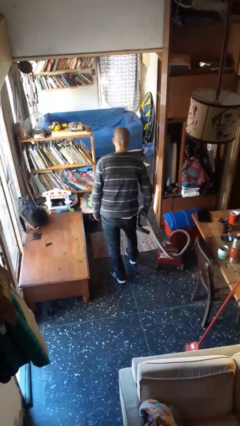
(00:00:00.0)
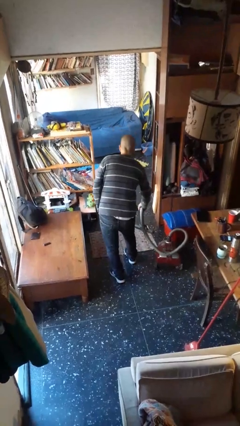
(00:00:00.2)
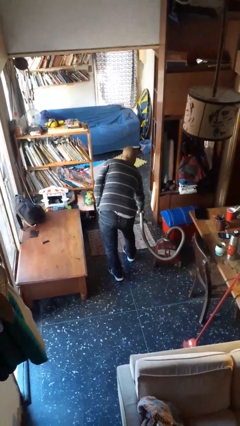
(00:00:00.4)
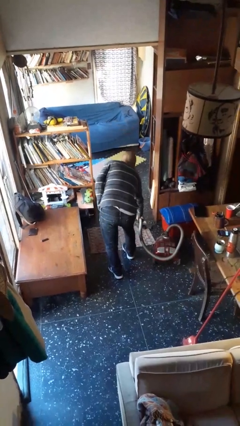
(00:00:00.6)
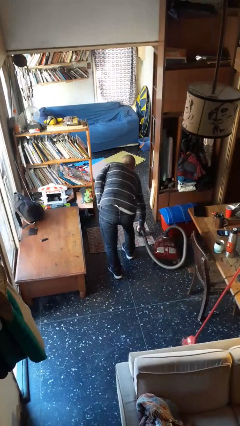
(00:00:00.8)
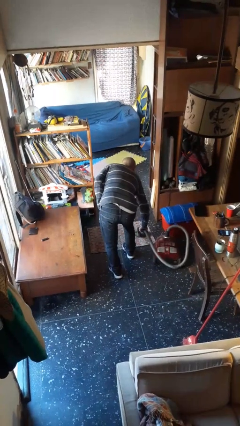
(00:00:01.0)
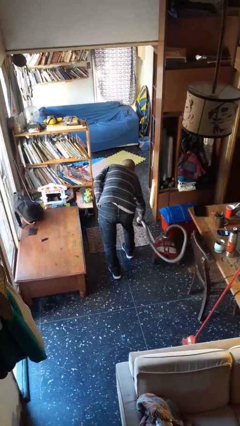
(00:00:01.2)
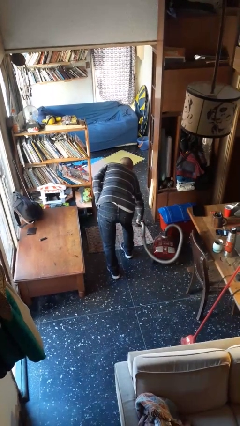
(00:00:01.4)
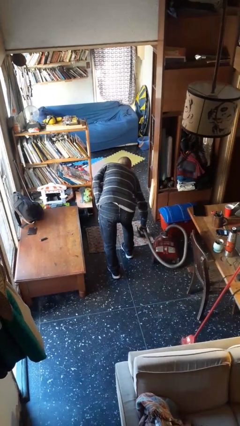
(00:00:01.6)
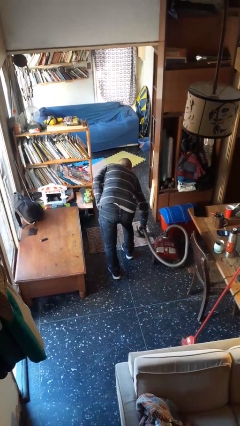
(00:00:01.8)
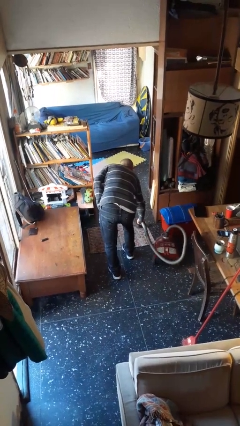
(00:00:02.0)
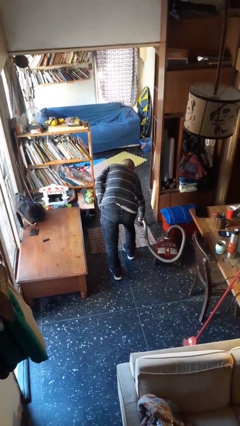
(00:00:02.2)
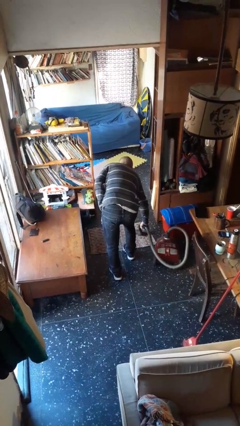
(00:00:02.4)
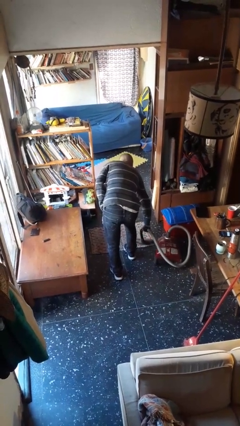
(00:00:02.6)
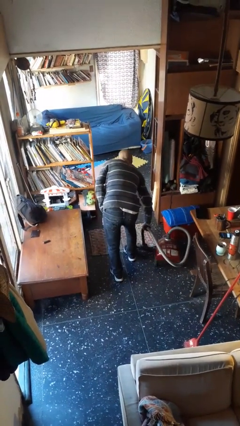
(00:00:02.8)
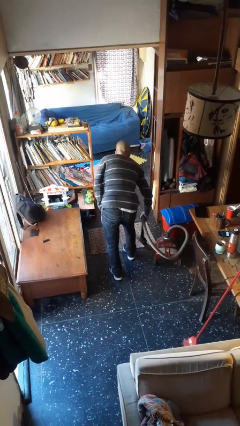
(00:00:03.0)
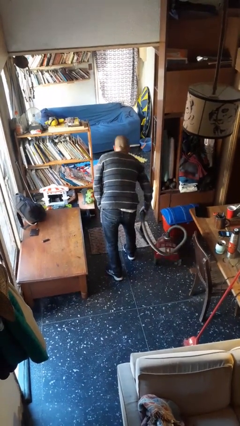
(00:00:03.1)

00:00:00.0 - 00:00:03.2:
person vacuums carpet

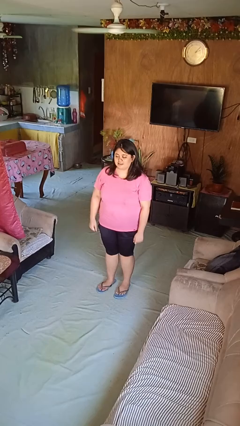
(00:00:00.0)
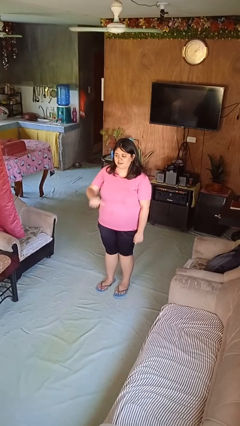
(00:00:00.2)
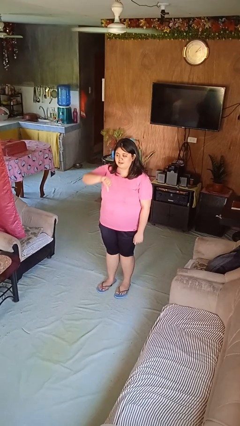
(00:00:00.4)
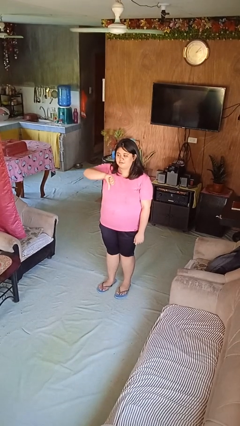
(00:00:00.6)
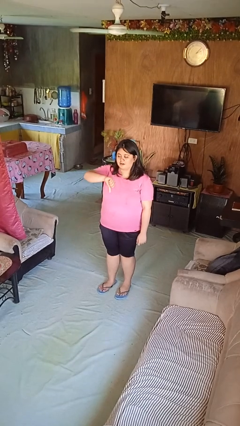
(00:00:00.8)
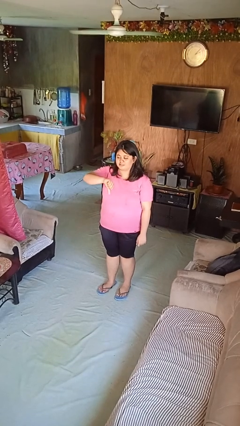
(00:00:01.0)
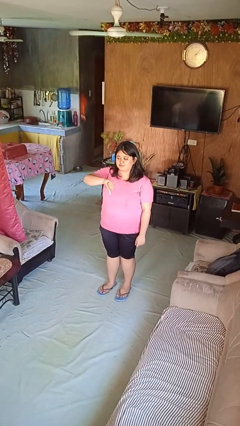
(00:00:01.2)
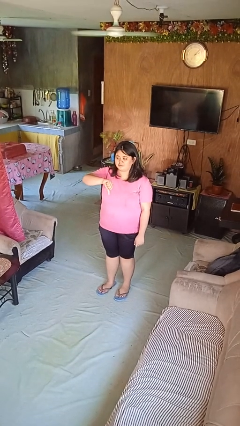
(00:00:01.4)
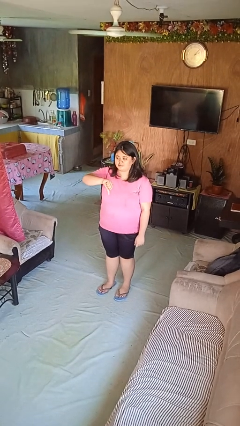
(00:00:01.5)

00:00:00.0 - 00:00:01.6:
person gestures thumbs down

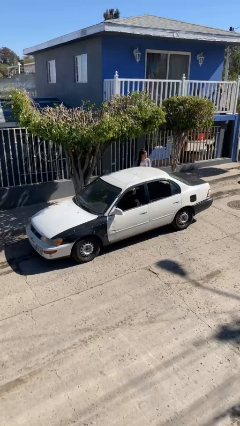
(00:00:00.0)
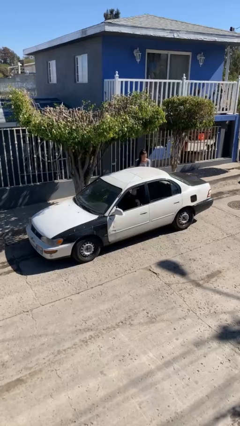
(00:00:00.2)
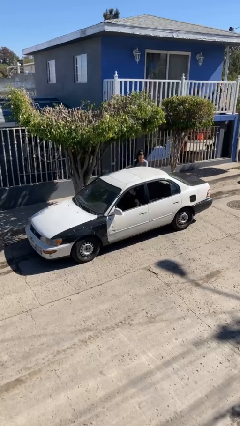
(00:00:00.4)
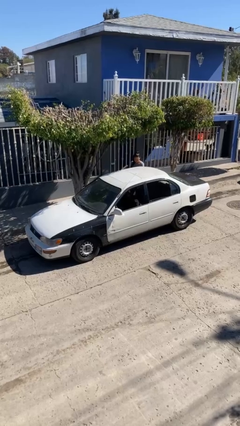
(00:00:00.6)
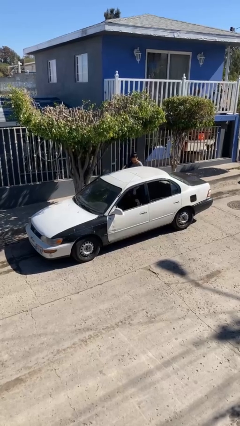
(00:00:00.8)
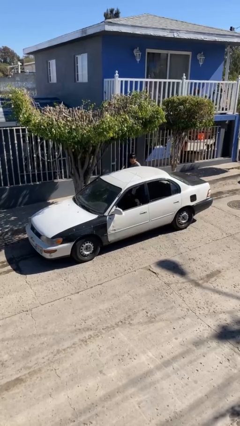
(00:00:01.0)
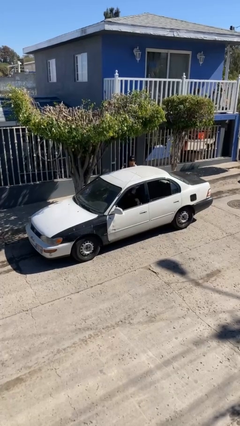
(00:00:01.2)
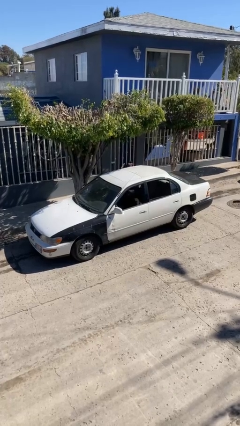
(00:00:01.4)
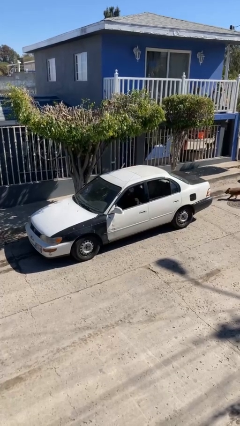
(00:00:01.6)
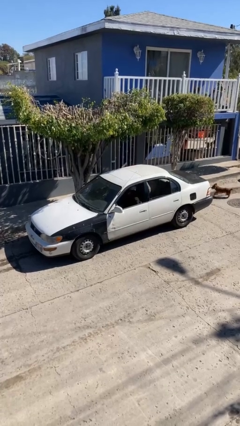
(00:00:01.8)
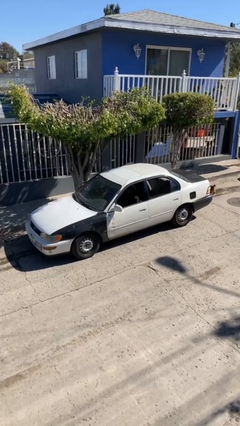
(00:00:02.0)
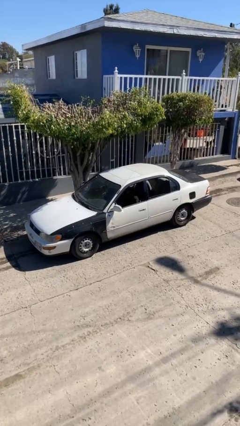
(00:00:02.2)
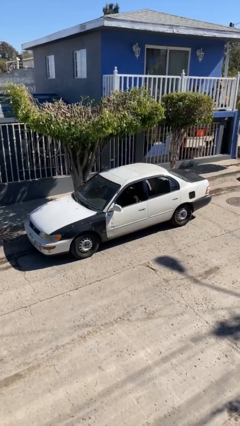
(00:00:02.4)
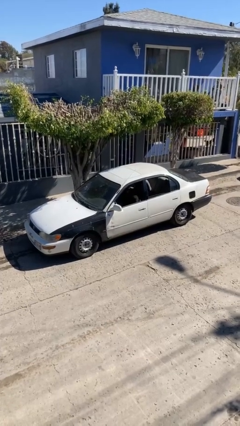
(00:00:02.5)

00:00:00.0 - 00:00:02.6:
car picks up person

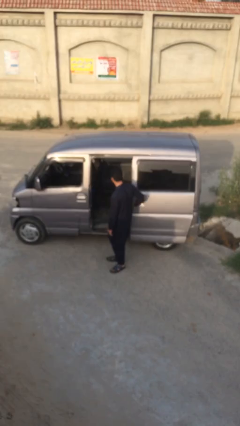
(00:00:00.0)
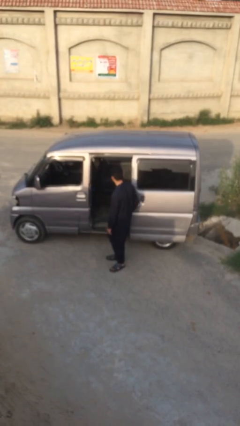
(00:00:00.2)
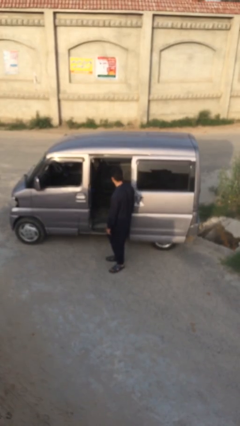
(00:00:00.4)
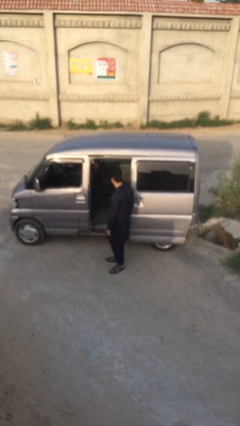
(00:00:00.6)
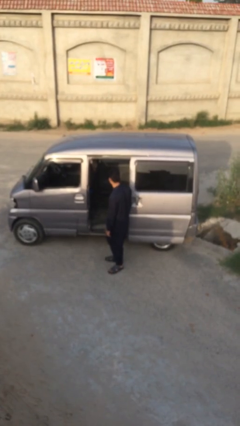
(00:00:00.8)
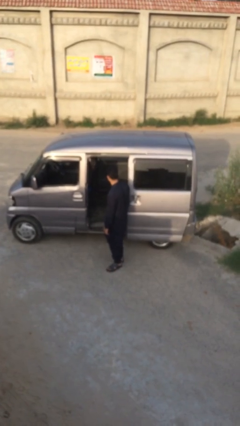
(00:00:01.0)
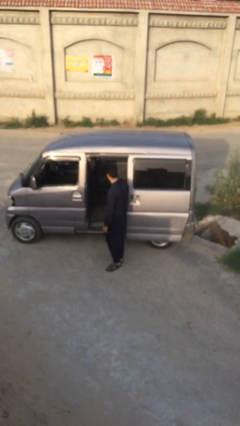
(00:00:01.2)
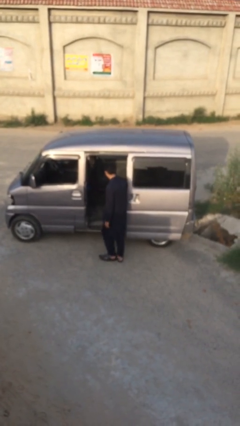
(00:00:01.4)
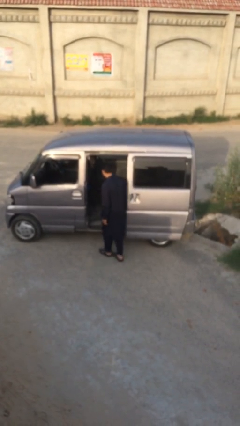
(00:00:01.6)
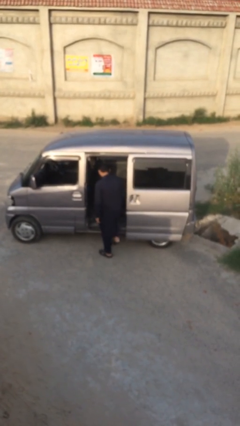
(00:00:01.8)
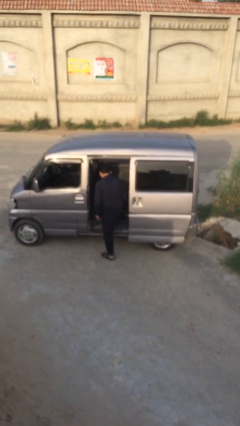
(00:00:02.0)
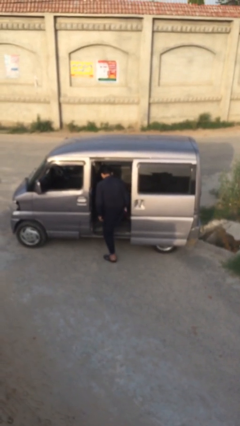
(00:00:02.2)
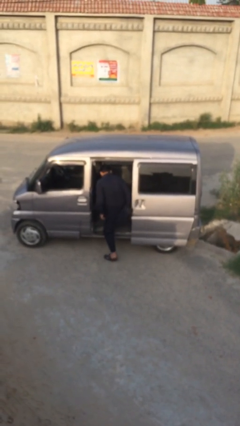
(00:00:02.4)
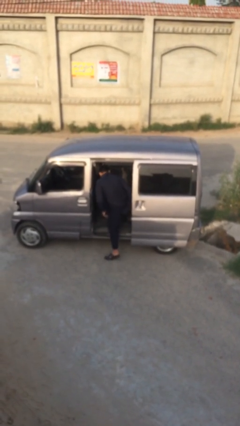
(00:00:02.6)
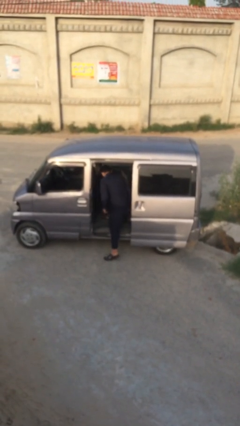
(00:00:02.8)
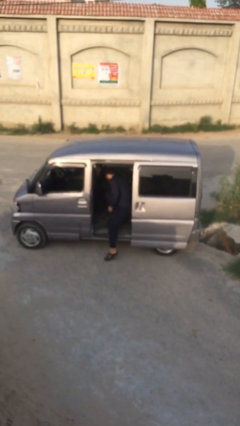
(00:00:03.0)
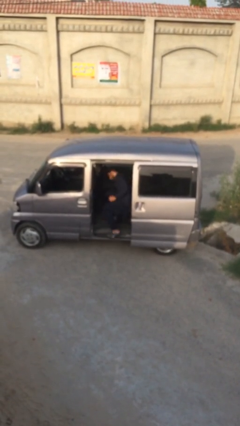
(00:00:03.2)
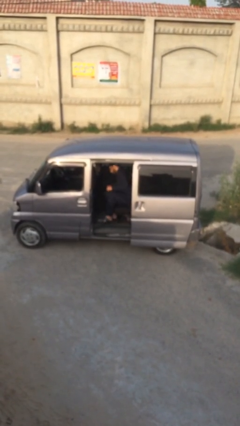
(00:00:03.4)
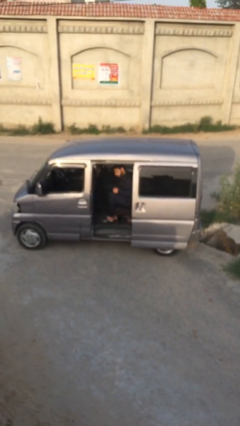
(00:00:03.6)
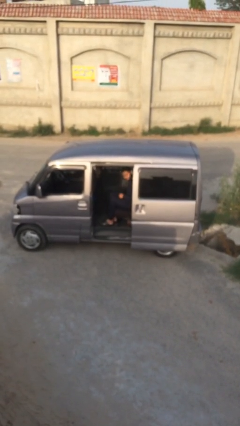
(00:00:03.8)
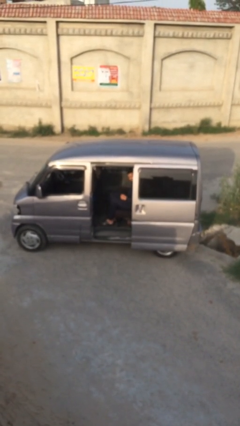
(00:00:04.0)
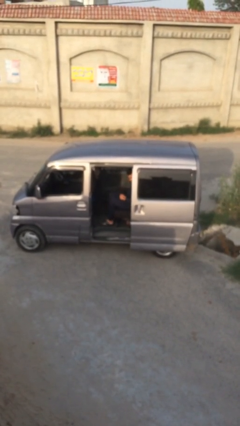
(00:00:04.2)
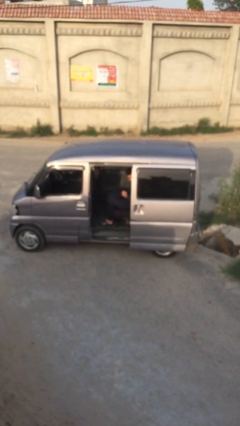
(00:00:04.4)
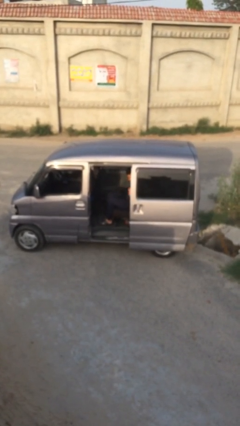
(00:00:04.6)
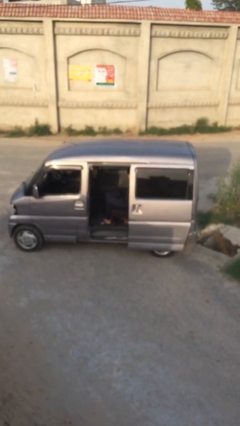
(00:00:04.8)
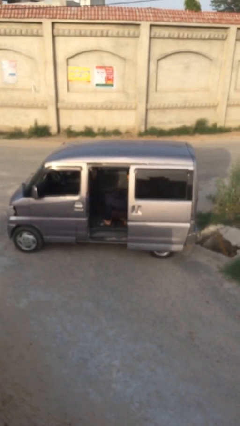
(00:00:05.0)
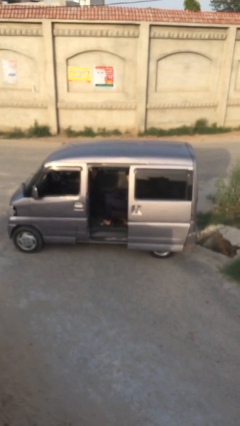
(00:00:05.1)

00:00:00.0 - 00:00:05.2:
person enters car

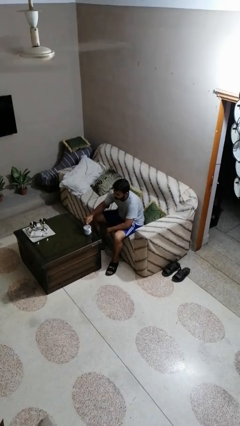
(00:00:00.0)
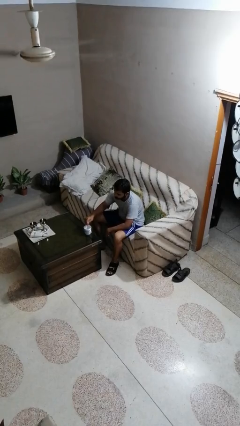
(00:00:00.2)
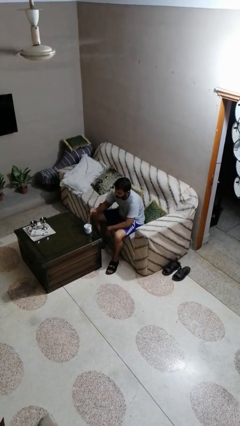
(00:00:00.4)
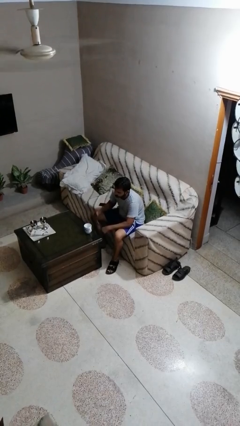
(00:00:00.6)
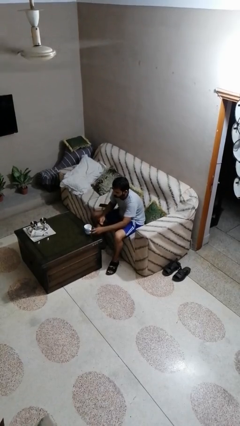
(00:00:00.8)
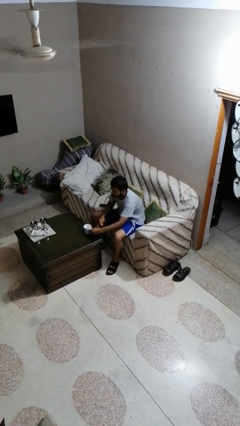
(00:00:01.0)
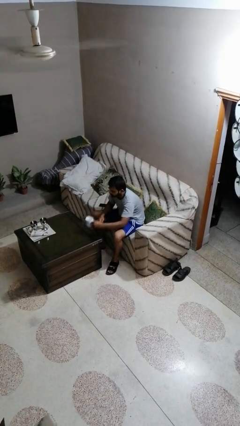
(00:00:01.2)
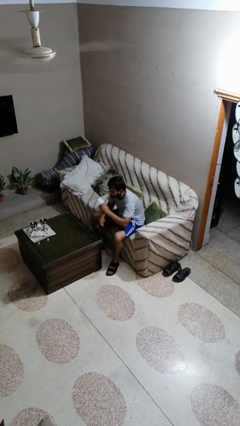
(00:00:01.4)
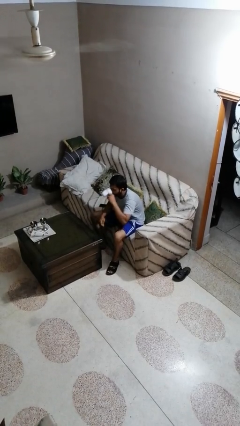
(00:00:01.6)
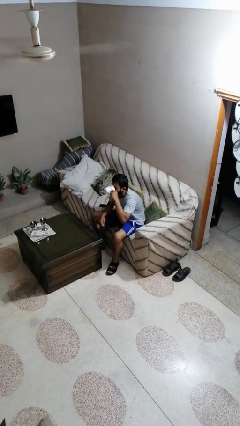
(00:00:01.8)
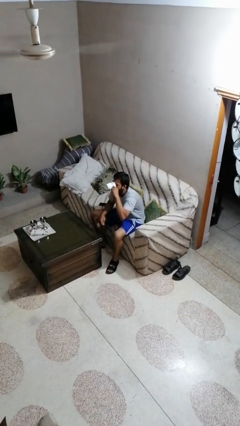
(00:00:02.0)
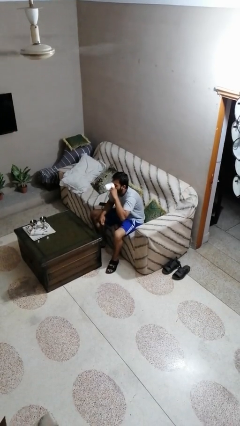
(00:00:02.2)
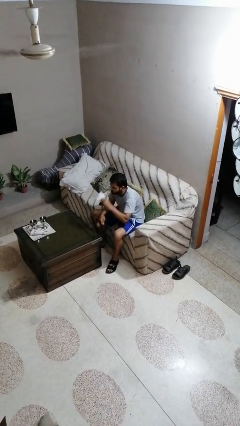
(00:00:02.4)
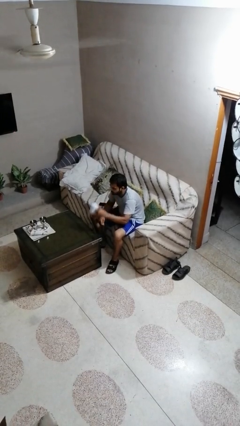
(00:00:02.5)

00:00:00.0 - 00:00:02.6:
person drinks from mug

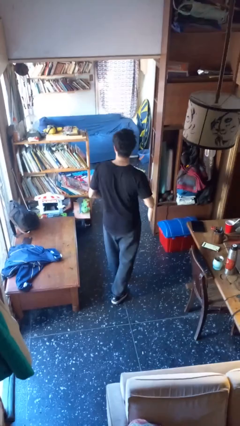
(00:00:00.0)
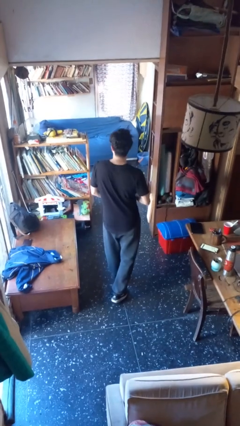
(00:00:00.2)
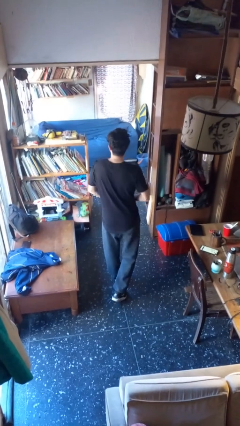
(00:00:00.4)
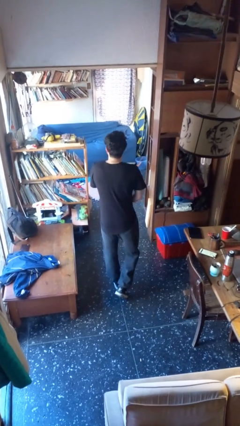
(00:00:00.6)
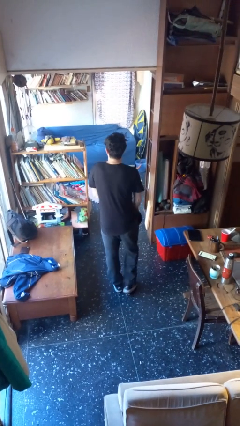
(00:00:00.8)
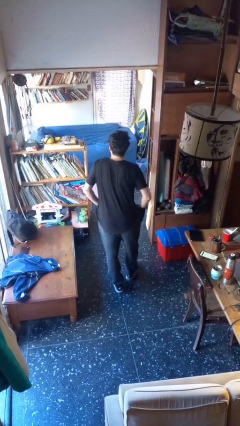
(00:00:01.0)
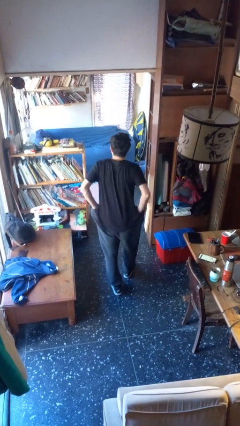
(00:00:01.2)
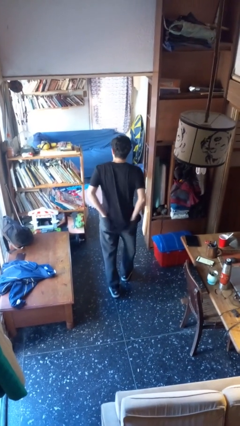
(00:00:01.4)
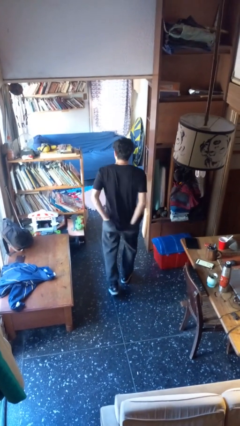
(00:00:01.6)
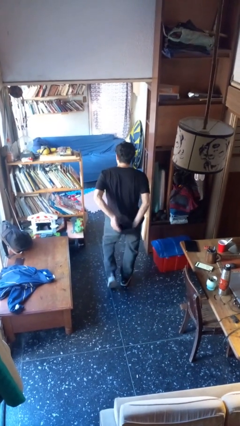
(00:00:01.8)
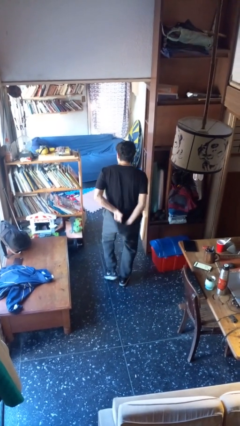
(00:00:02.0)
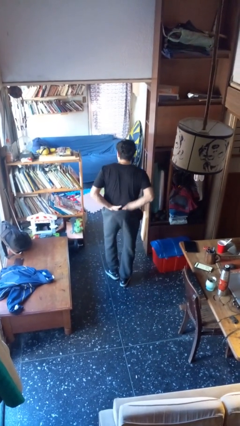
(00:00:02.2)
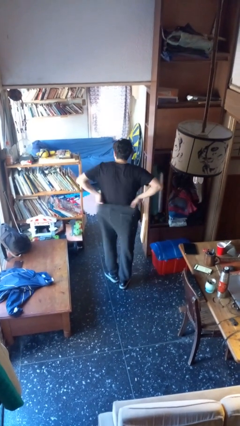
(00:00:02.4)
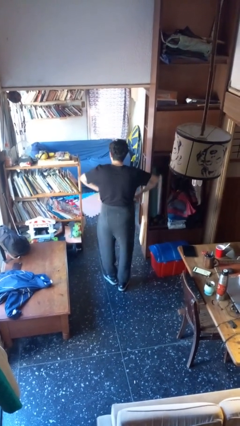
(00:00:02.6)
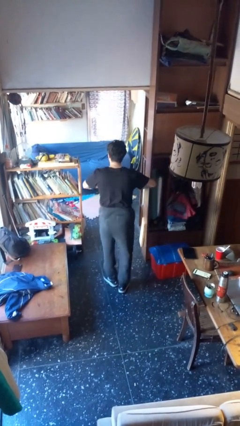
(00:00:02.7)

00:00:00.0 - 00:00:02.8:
person tucks in shirt
